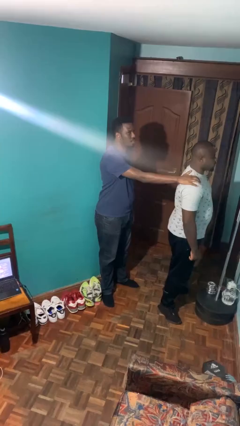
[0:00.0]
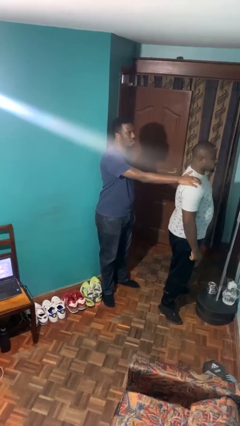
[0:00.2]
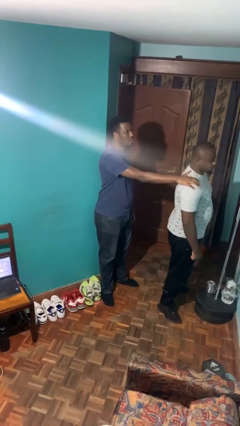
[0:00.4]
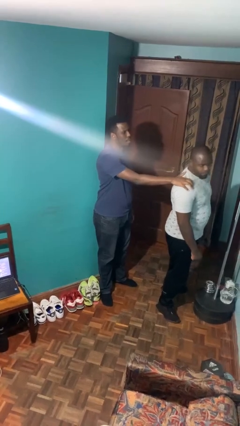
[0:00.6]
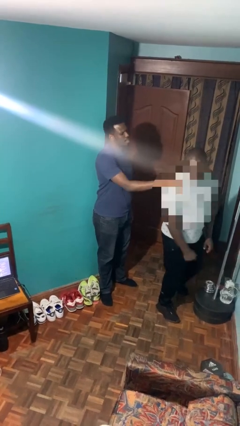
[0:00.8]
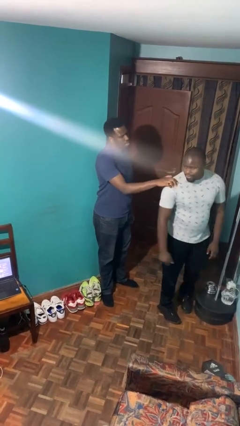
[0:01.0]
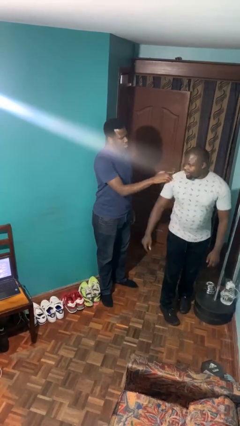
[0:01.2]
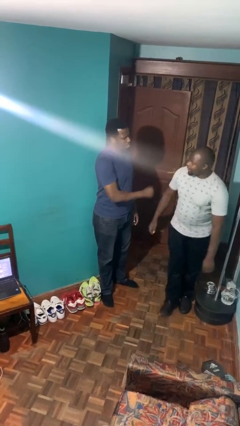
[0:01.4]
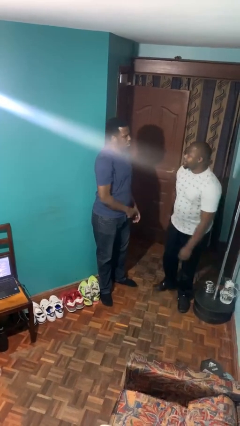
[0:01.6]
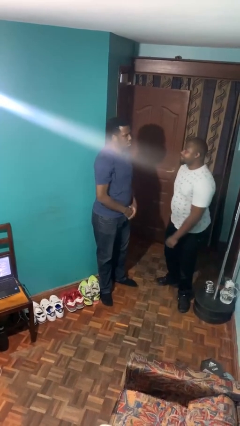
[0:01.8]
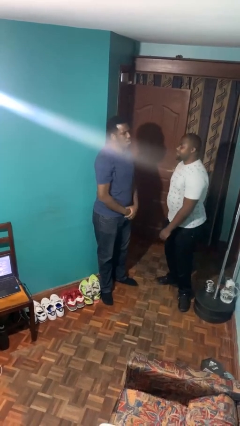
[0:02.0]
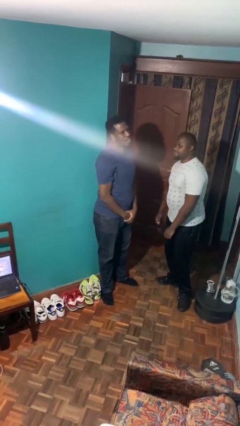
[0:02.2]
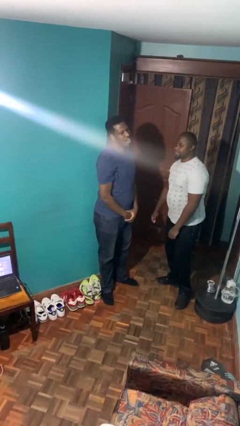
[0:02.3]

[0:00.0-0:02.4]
person spins person around

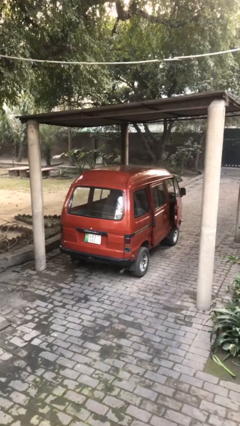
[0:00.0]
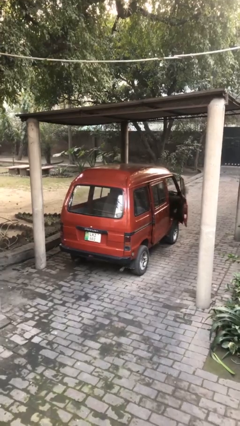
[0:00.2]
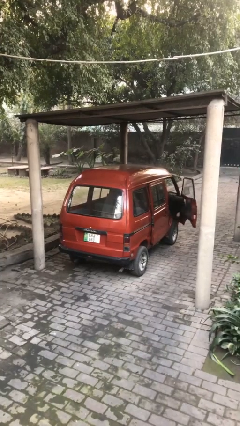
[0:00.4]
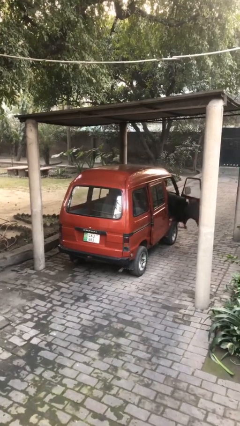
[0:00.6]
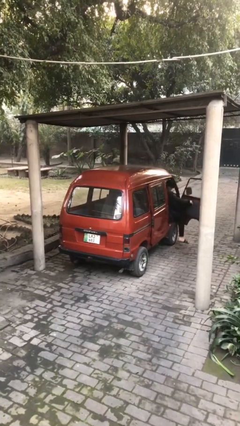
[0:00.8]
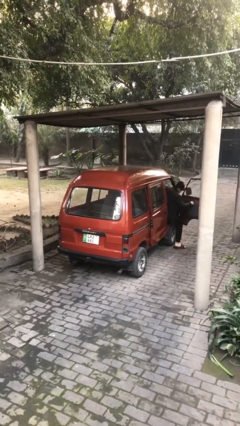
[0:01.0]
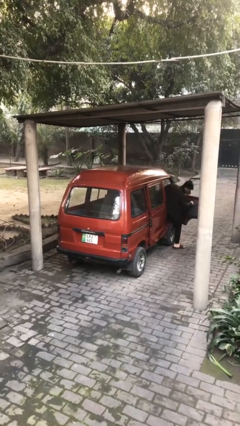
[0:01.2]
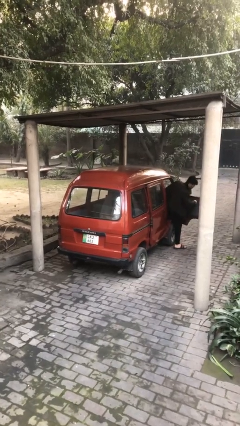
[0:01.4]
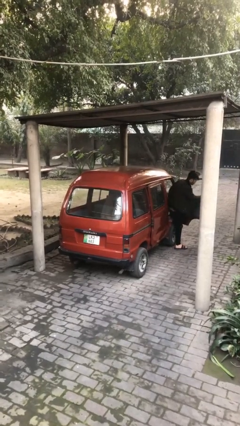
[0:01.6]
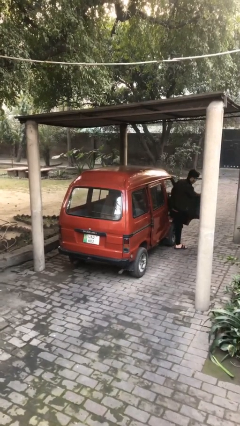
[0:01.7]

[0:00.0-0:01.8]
car drops off person

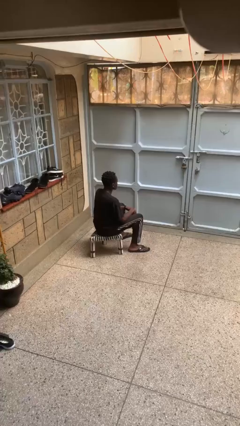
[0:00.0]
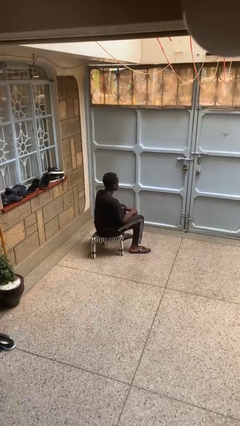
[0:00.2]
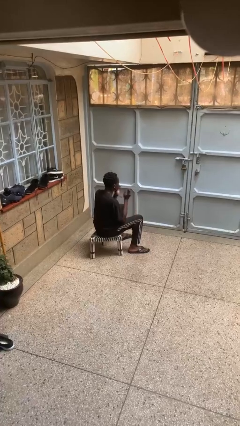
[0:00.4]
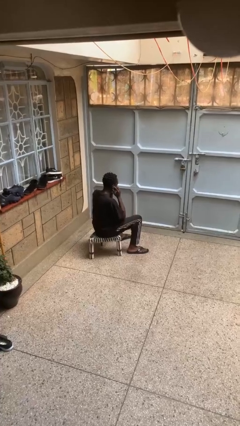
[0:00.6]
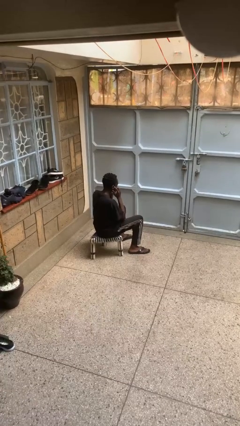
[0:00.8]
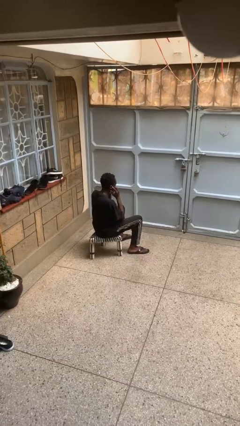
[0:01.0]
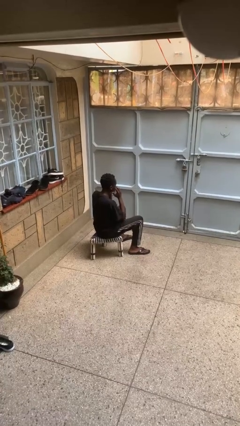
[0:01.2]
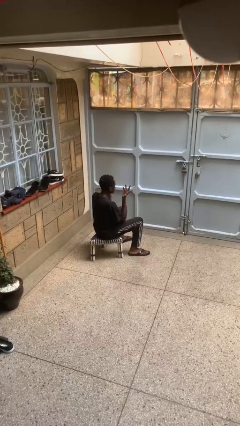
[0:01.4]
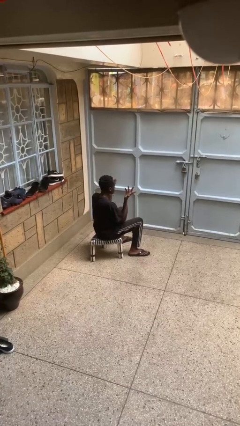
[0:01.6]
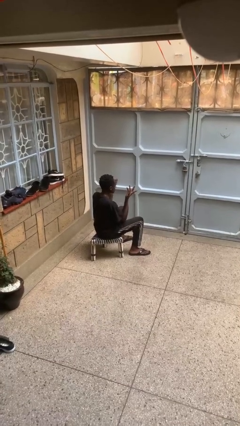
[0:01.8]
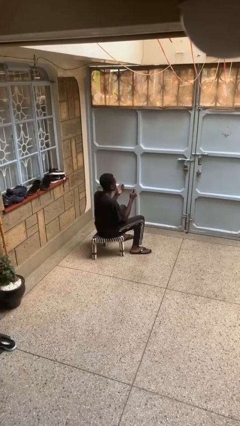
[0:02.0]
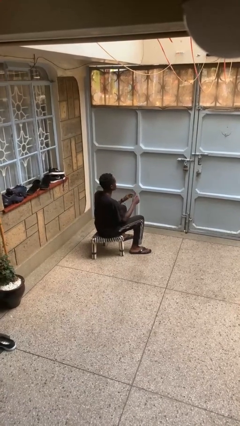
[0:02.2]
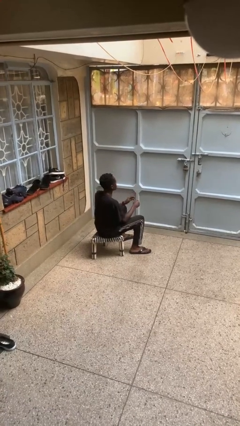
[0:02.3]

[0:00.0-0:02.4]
person puts fingers in ear

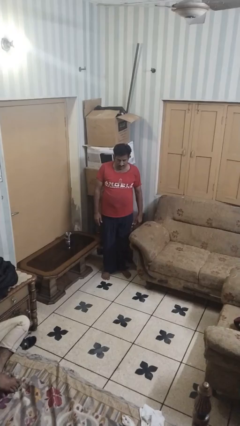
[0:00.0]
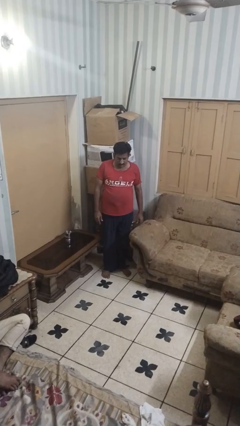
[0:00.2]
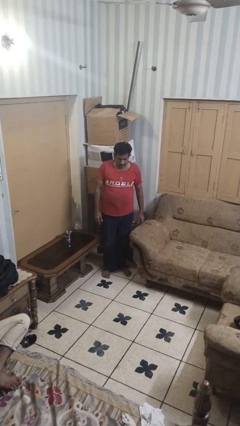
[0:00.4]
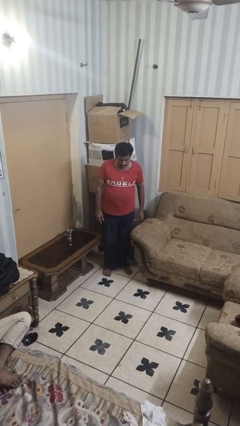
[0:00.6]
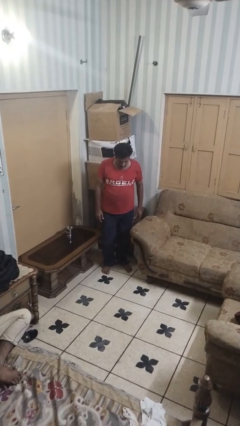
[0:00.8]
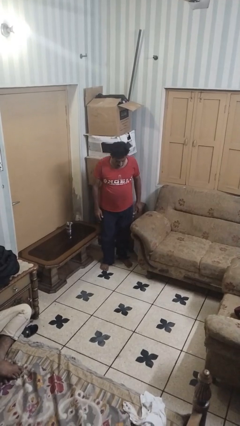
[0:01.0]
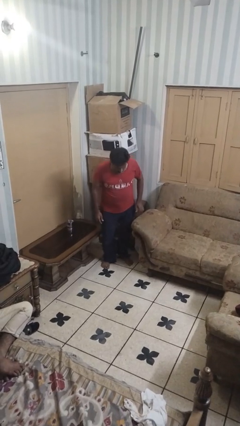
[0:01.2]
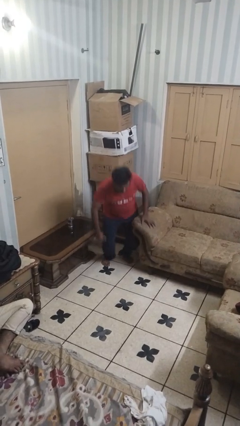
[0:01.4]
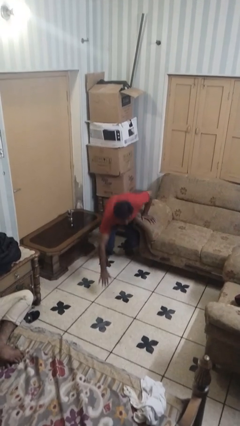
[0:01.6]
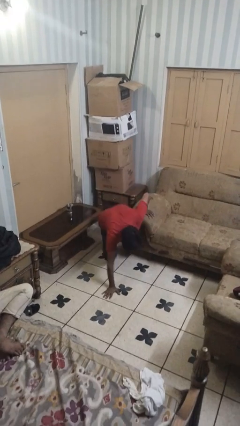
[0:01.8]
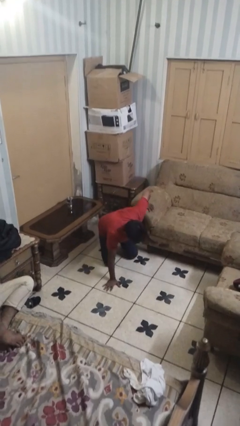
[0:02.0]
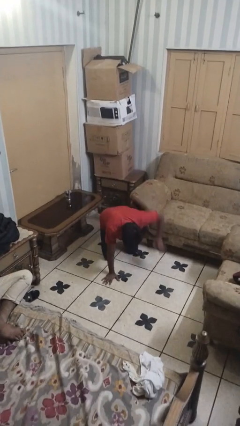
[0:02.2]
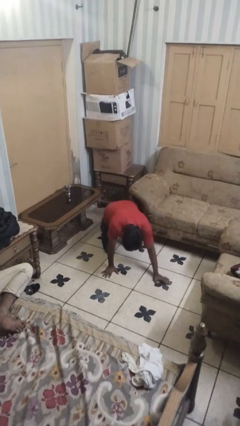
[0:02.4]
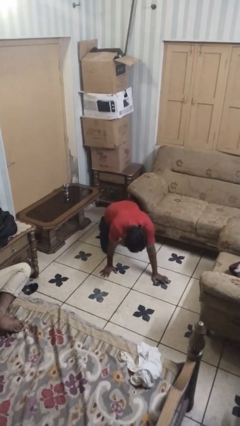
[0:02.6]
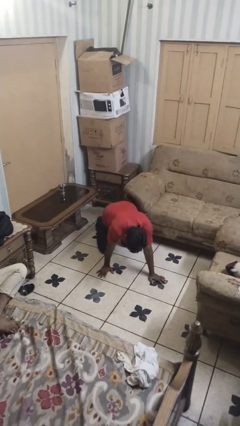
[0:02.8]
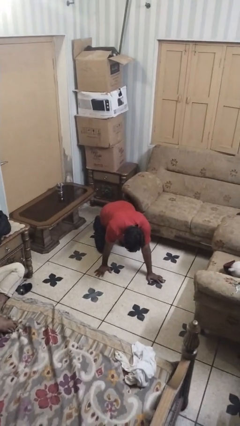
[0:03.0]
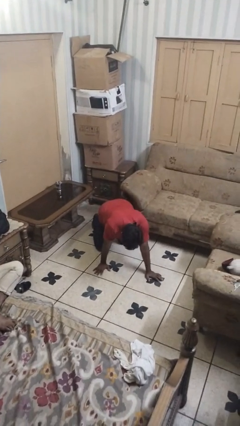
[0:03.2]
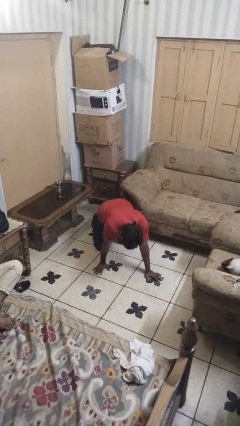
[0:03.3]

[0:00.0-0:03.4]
person trips on object on floor

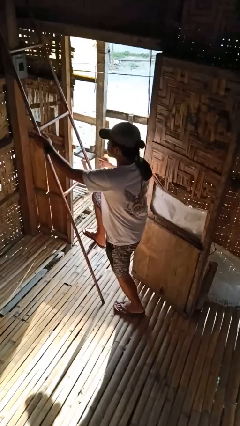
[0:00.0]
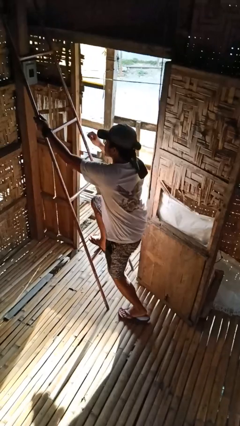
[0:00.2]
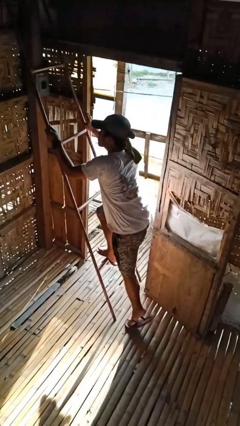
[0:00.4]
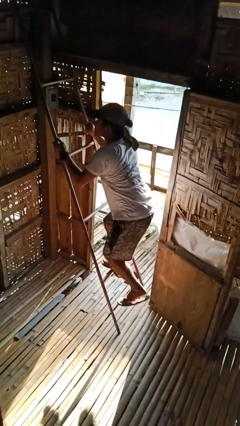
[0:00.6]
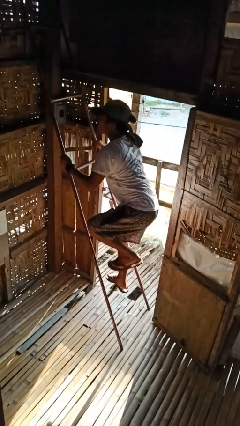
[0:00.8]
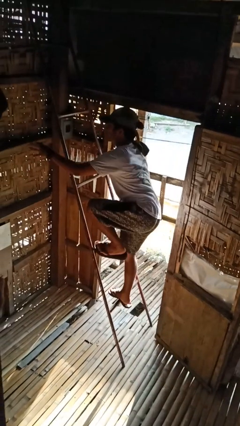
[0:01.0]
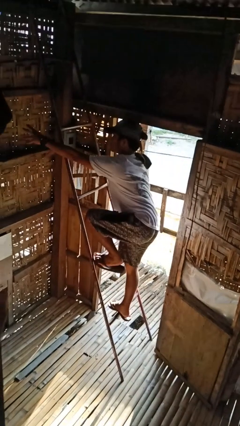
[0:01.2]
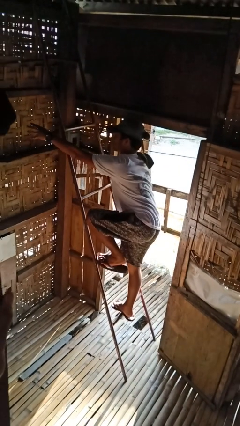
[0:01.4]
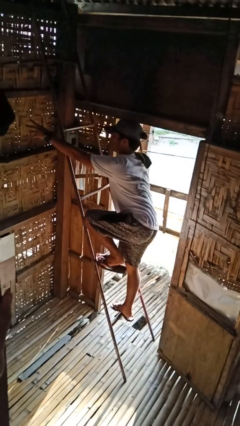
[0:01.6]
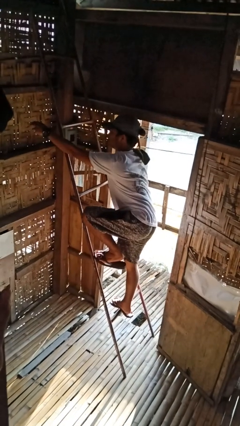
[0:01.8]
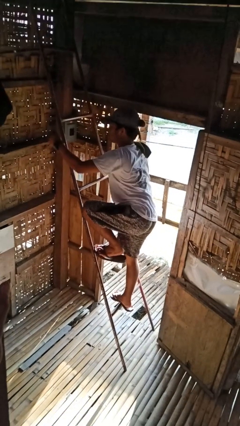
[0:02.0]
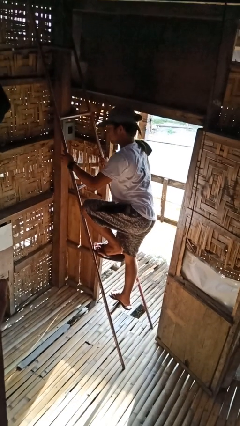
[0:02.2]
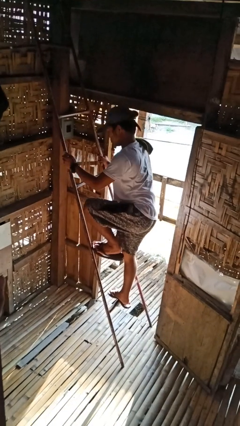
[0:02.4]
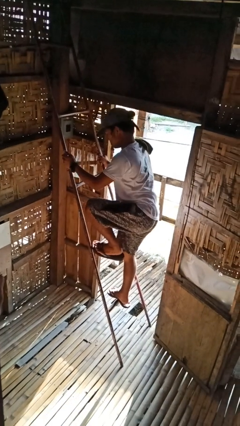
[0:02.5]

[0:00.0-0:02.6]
person climbs up ladder

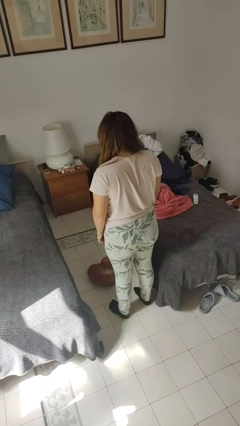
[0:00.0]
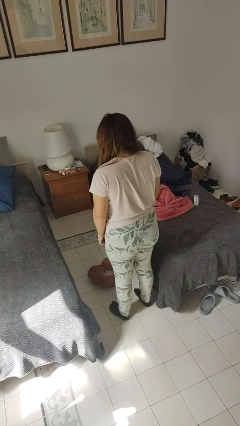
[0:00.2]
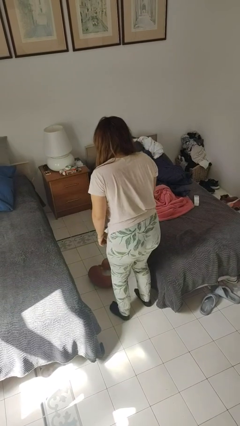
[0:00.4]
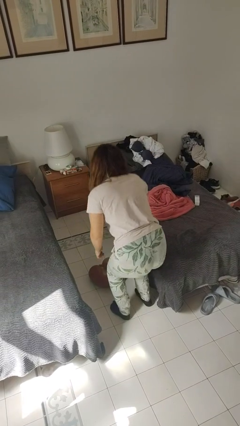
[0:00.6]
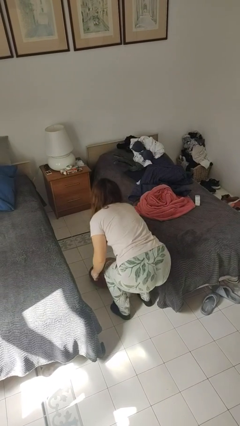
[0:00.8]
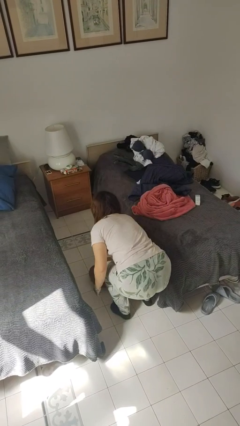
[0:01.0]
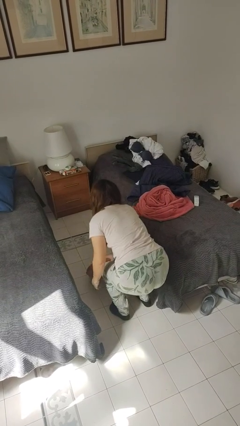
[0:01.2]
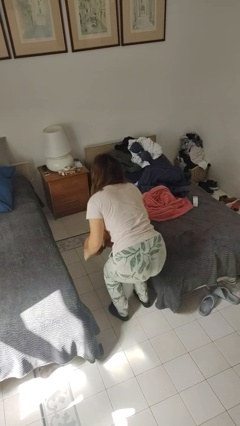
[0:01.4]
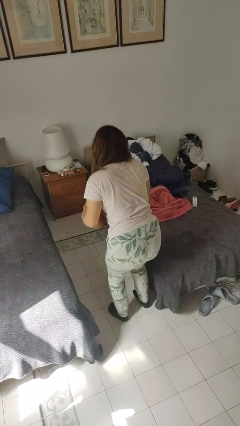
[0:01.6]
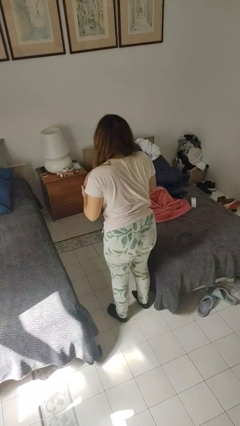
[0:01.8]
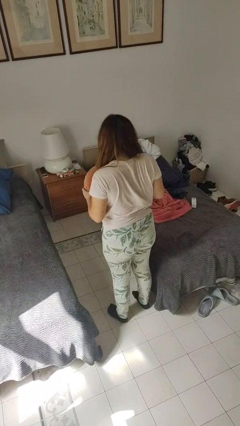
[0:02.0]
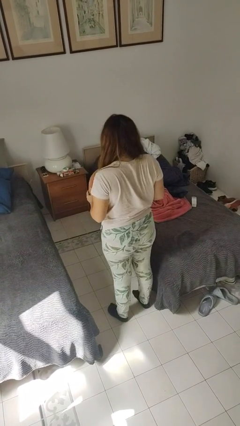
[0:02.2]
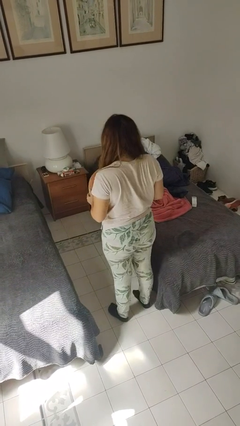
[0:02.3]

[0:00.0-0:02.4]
person picks up object from floor

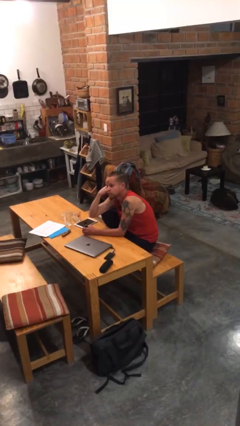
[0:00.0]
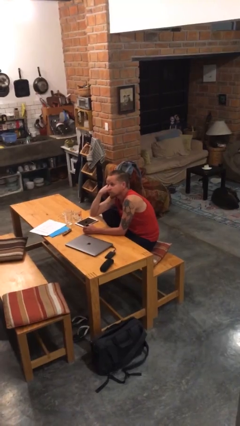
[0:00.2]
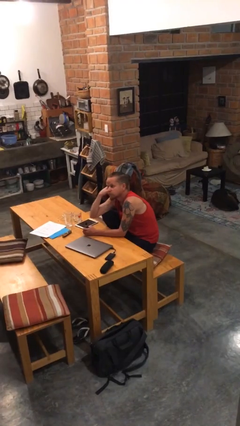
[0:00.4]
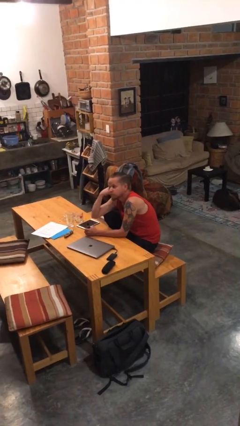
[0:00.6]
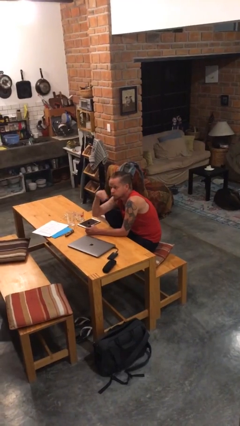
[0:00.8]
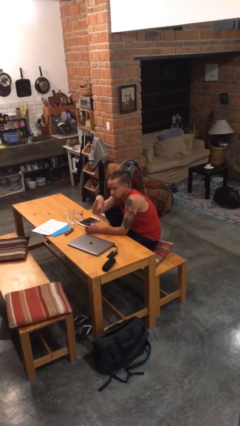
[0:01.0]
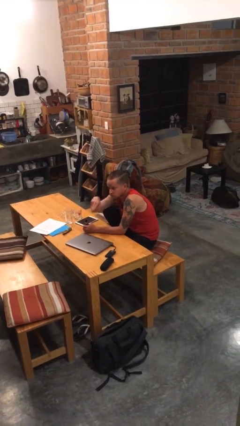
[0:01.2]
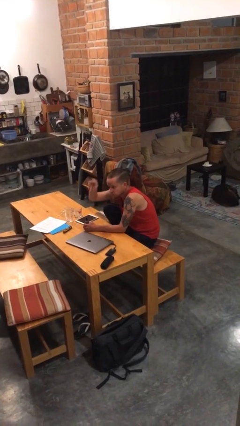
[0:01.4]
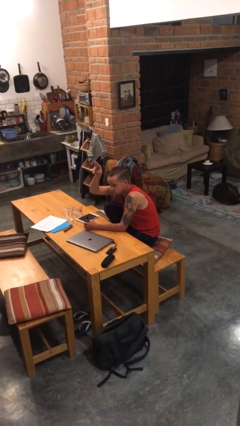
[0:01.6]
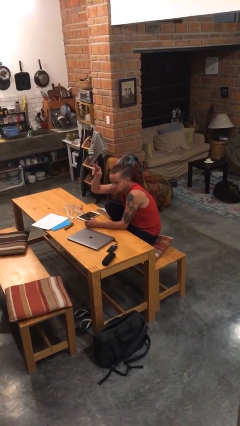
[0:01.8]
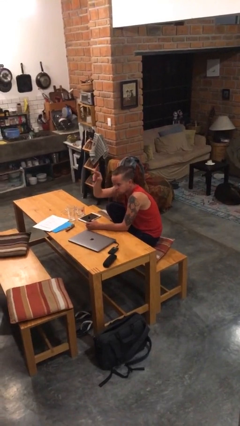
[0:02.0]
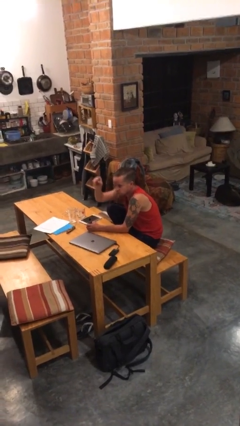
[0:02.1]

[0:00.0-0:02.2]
person gestures swipe up

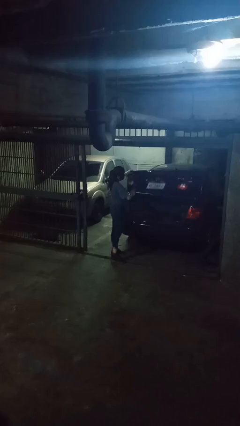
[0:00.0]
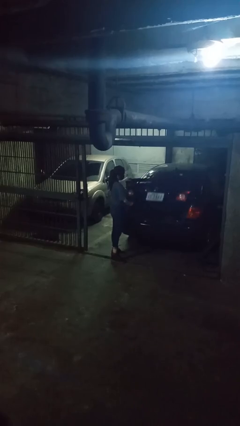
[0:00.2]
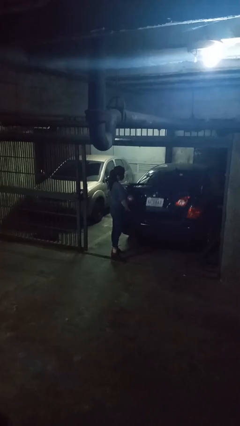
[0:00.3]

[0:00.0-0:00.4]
person closes car trunk
